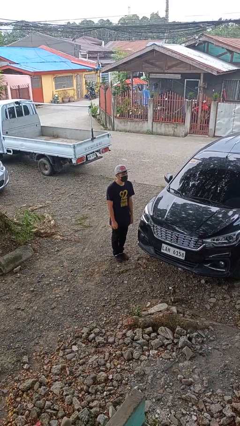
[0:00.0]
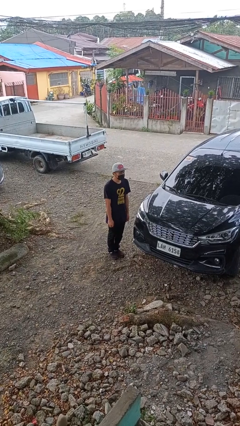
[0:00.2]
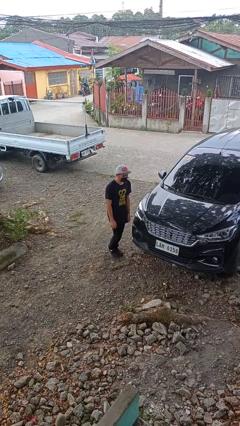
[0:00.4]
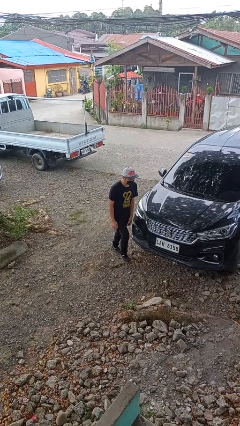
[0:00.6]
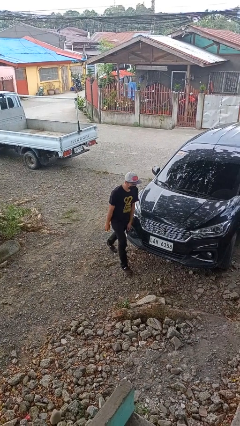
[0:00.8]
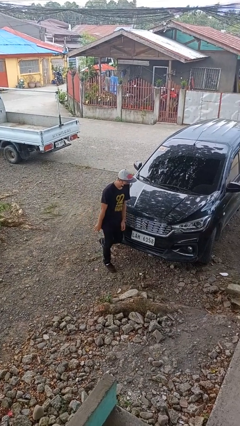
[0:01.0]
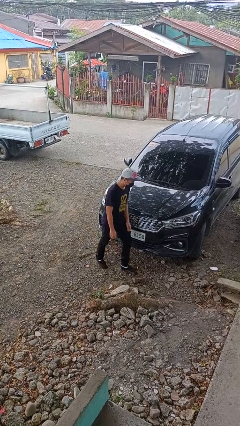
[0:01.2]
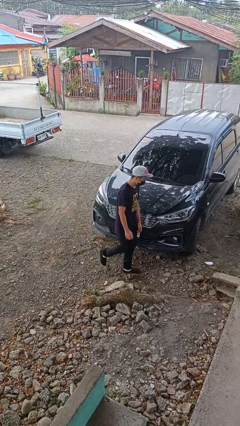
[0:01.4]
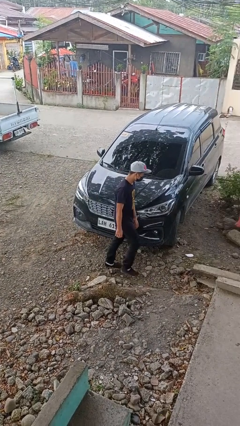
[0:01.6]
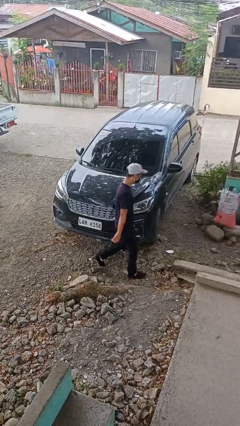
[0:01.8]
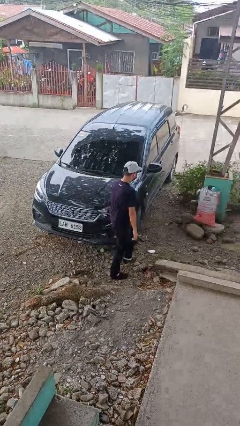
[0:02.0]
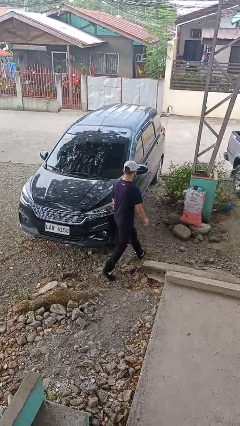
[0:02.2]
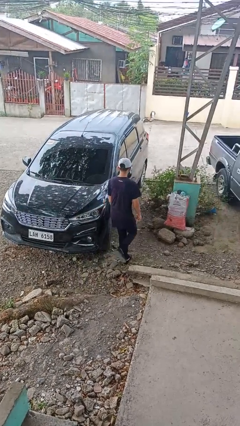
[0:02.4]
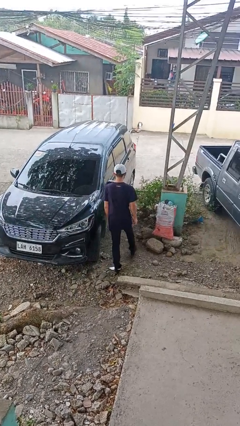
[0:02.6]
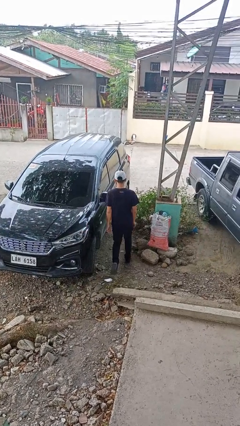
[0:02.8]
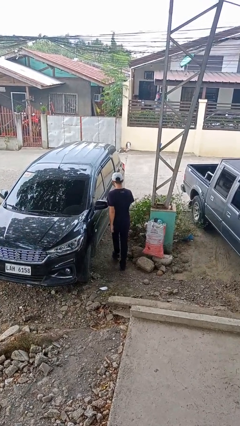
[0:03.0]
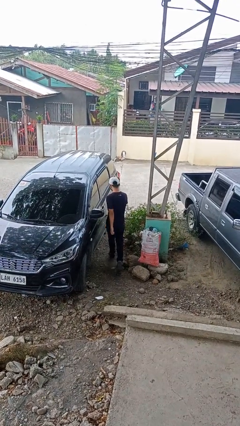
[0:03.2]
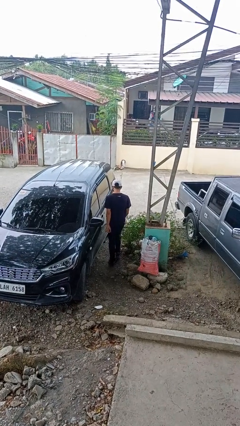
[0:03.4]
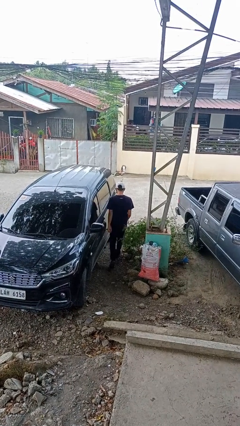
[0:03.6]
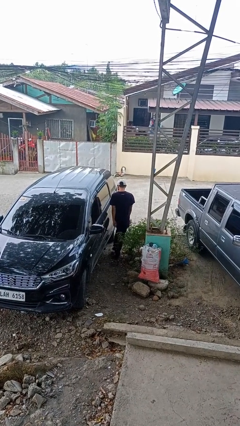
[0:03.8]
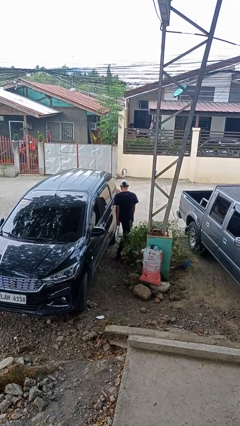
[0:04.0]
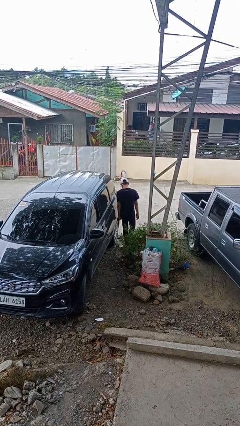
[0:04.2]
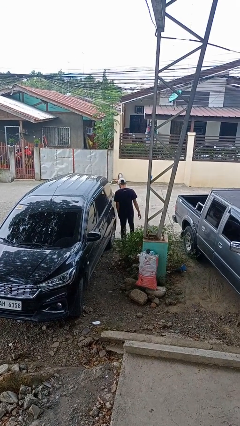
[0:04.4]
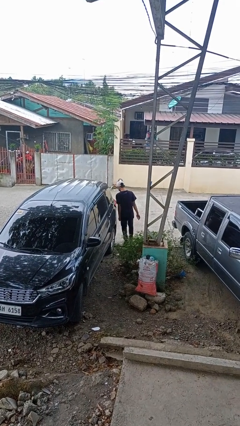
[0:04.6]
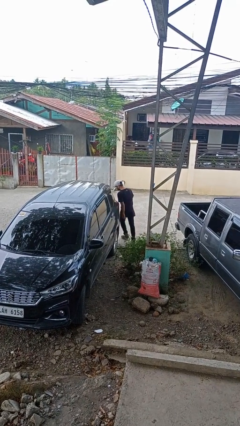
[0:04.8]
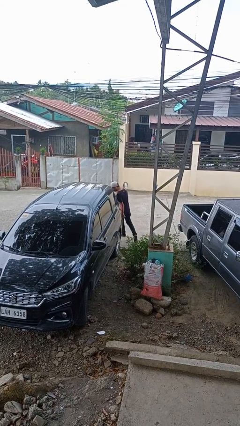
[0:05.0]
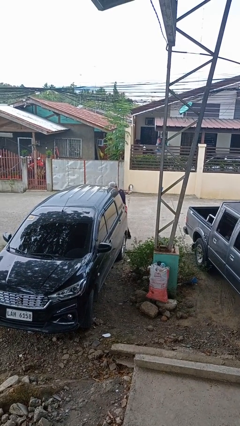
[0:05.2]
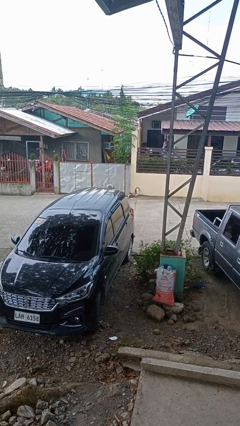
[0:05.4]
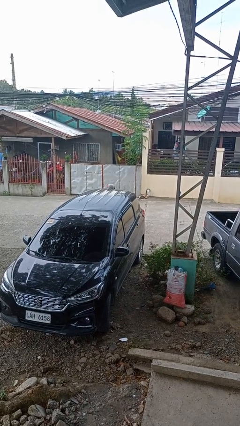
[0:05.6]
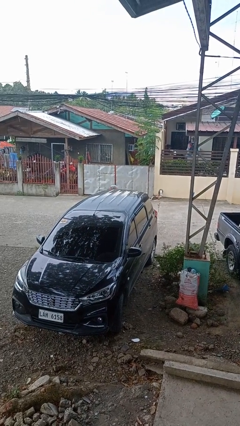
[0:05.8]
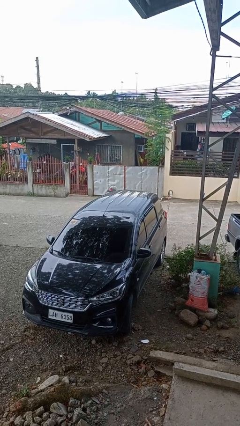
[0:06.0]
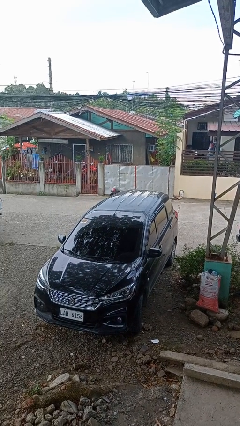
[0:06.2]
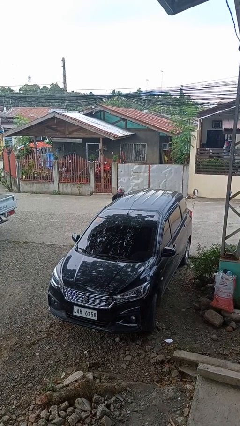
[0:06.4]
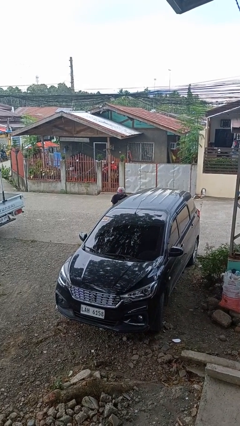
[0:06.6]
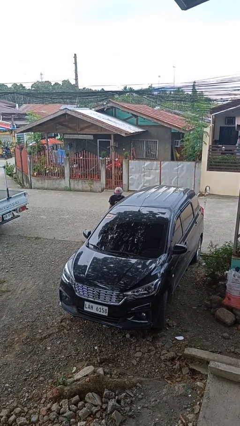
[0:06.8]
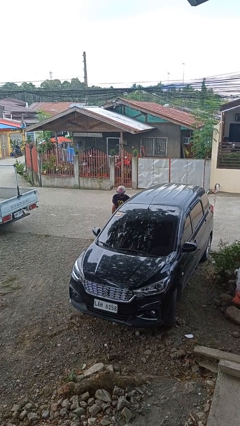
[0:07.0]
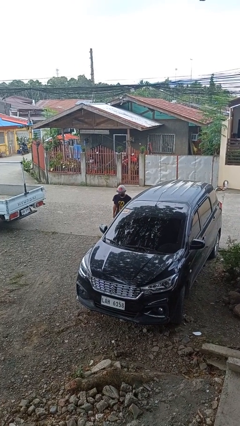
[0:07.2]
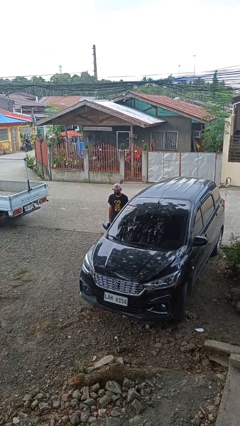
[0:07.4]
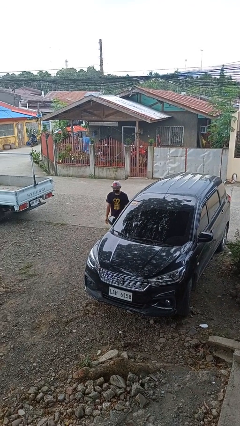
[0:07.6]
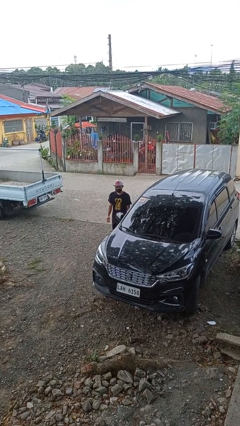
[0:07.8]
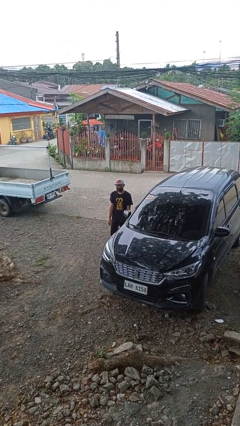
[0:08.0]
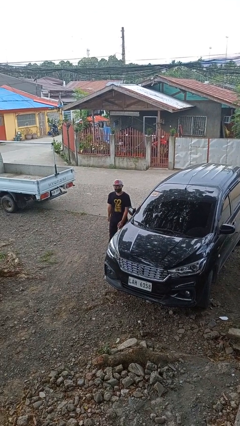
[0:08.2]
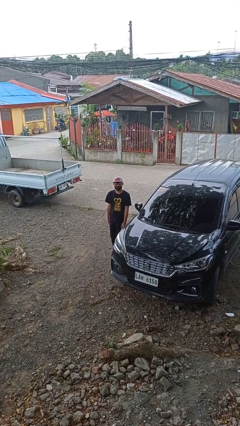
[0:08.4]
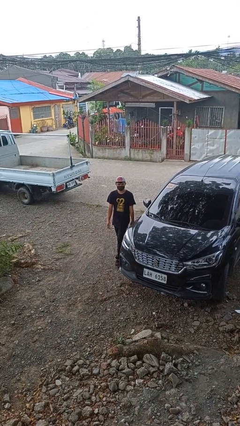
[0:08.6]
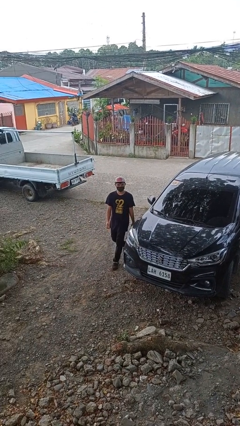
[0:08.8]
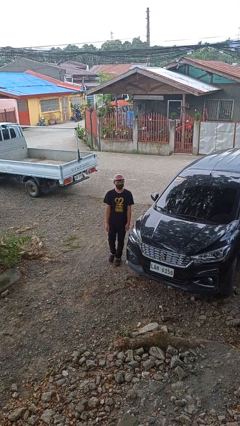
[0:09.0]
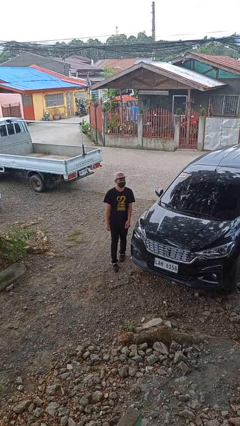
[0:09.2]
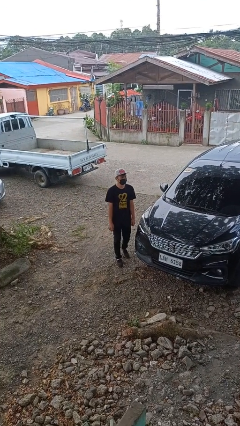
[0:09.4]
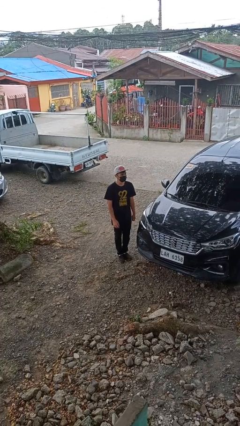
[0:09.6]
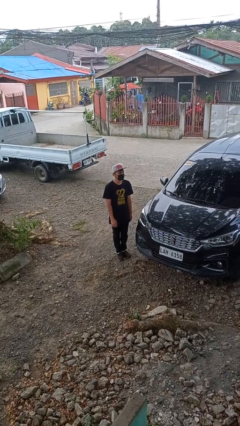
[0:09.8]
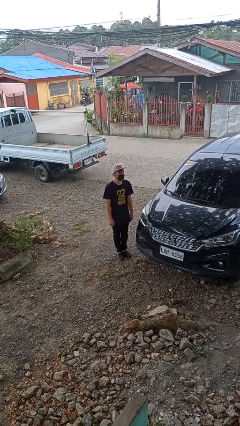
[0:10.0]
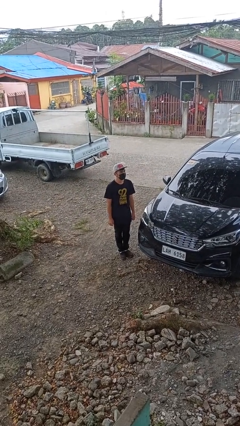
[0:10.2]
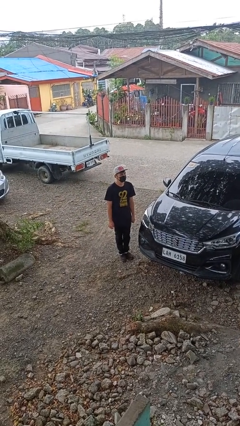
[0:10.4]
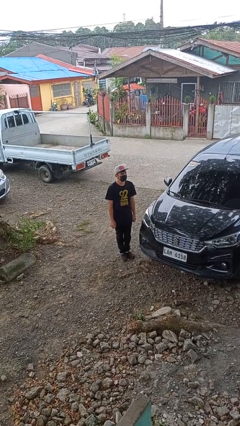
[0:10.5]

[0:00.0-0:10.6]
person walks around car

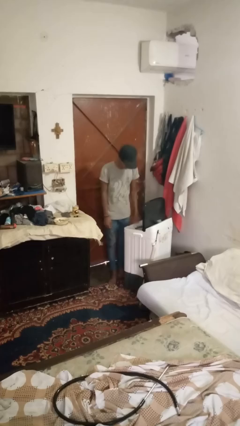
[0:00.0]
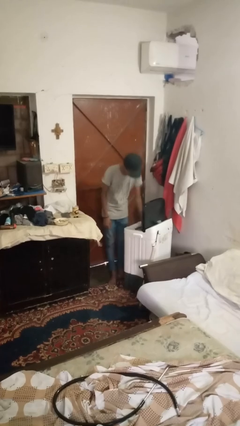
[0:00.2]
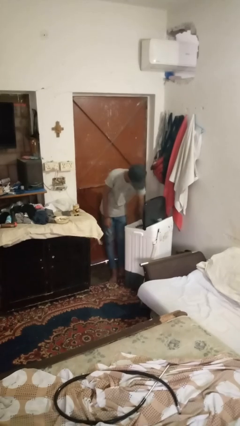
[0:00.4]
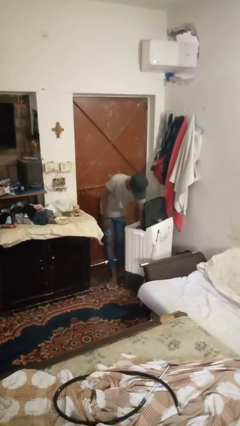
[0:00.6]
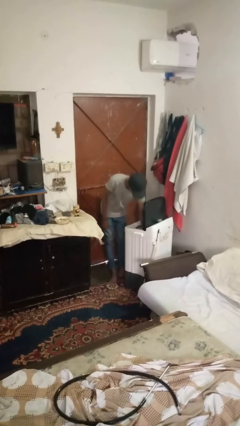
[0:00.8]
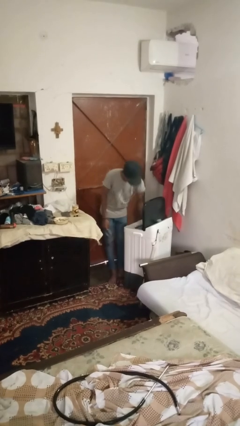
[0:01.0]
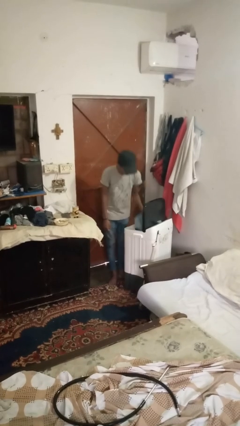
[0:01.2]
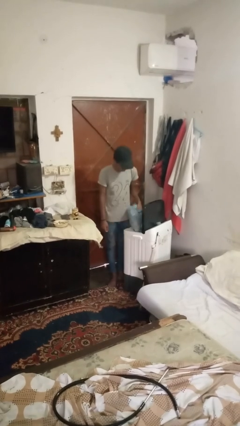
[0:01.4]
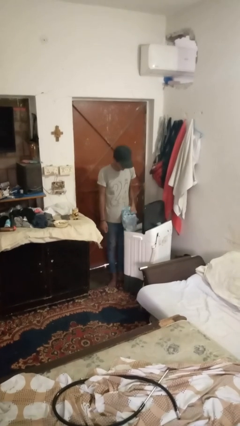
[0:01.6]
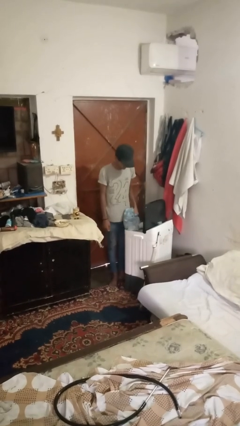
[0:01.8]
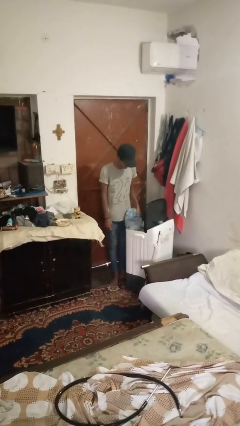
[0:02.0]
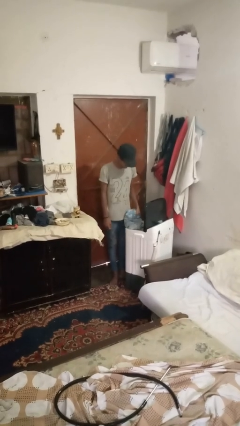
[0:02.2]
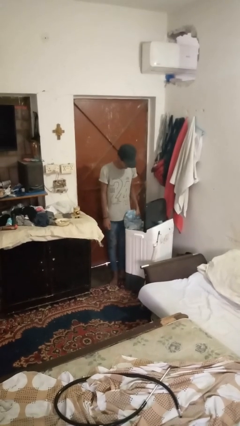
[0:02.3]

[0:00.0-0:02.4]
person unloads clotheswasher

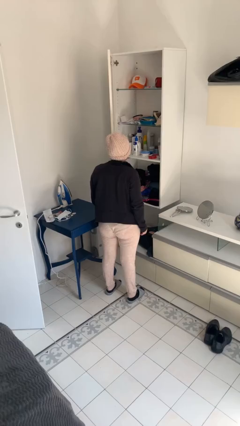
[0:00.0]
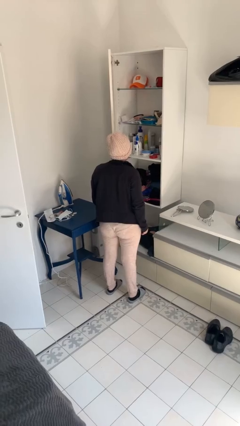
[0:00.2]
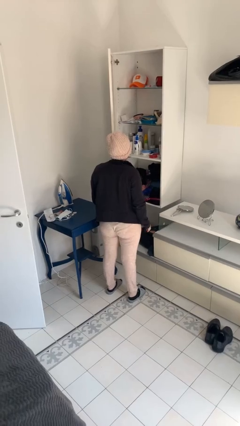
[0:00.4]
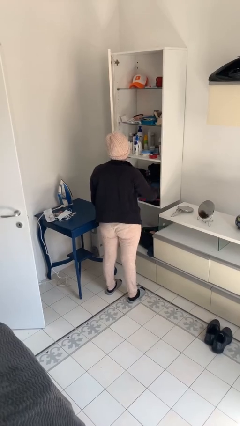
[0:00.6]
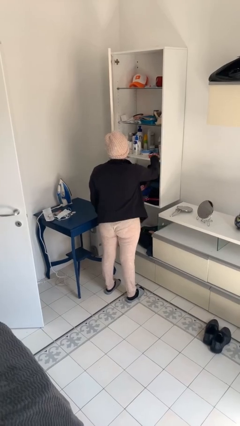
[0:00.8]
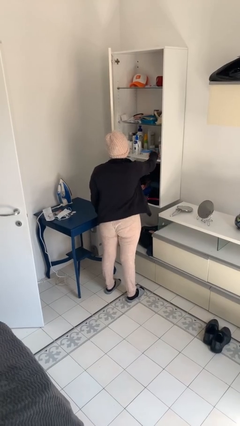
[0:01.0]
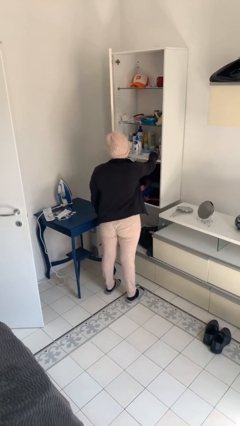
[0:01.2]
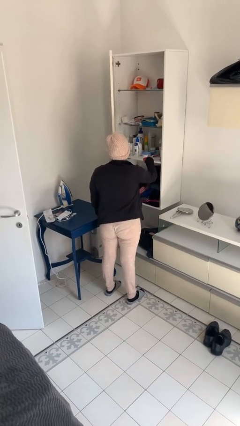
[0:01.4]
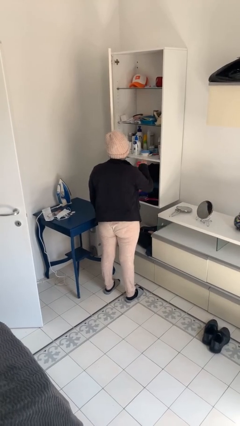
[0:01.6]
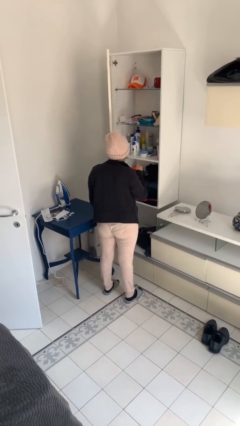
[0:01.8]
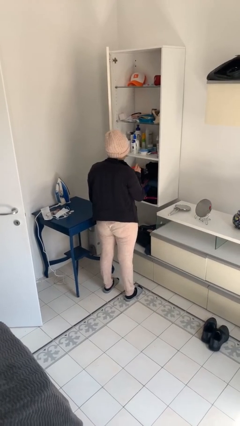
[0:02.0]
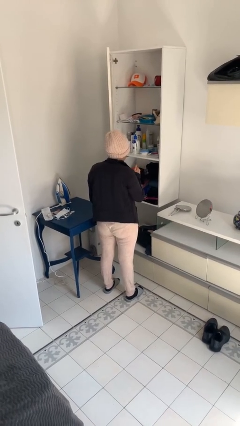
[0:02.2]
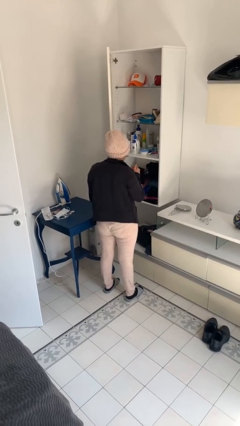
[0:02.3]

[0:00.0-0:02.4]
person picks up object from shelf

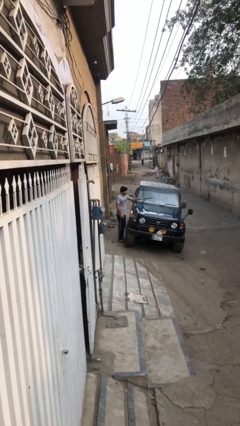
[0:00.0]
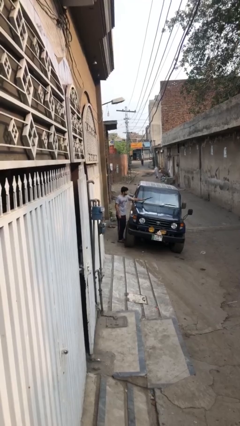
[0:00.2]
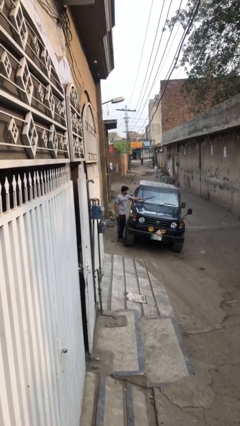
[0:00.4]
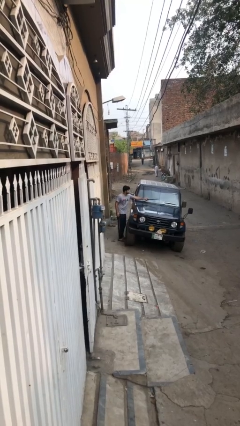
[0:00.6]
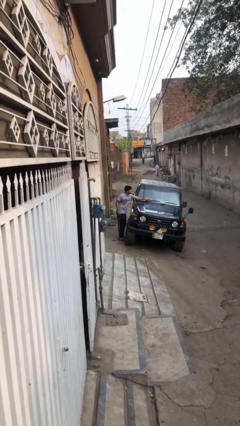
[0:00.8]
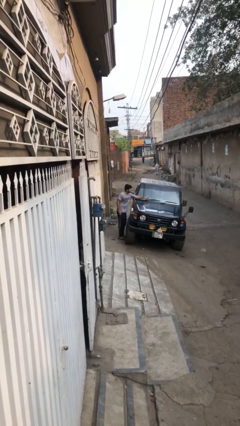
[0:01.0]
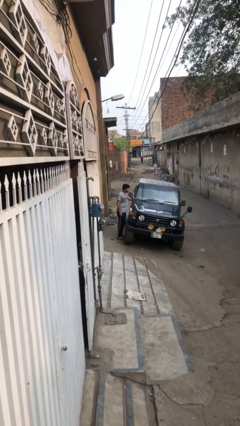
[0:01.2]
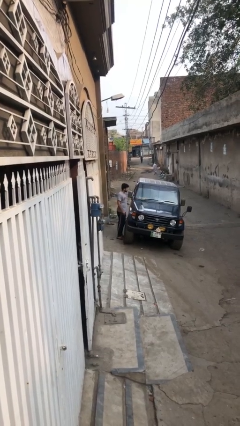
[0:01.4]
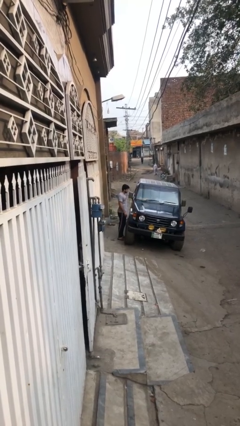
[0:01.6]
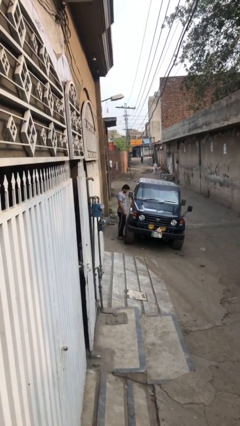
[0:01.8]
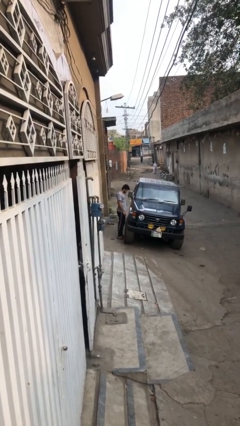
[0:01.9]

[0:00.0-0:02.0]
person flips down car wipers
